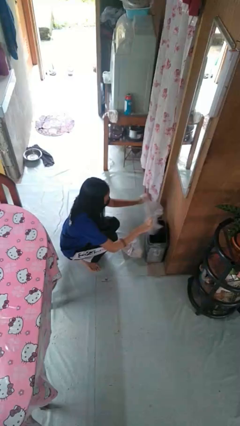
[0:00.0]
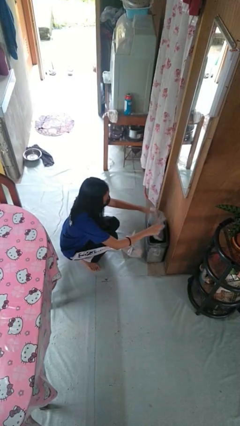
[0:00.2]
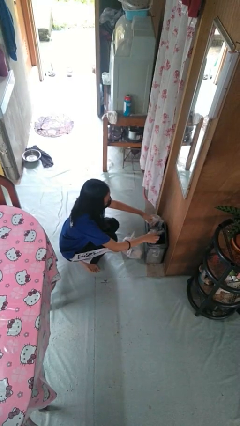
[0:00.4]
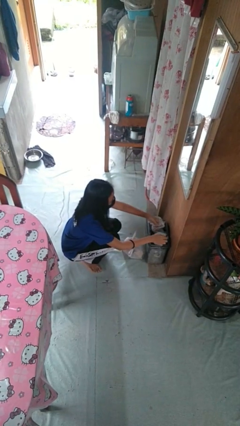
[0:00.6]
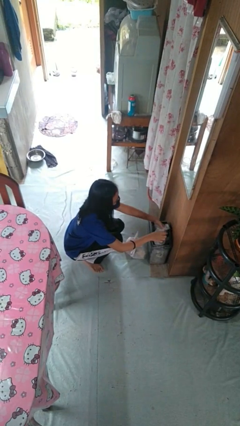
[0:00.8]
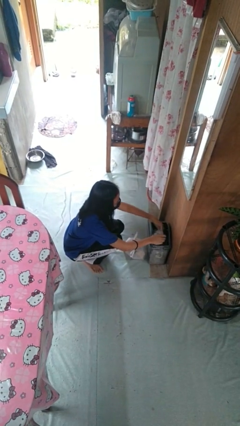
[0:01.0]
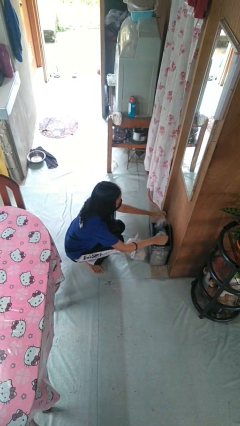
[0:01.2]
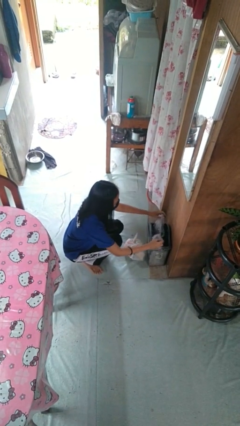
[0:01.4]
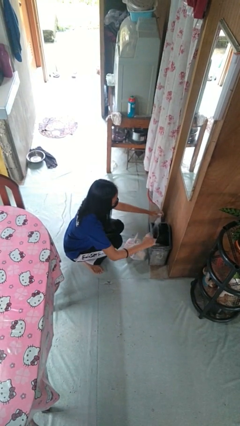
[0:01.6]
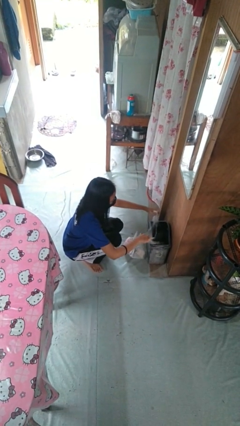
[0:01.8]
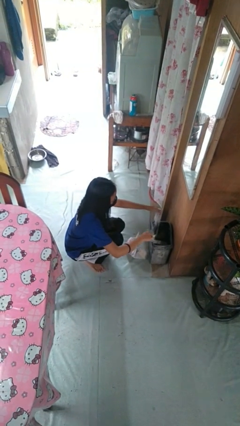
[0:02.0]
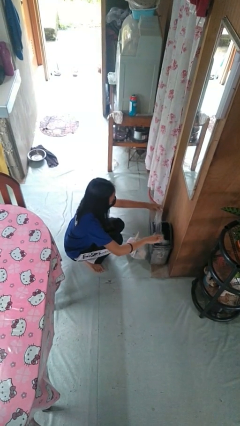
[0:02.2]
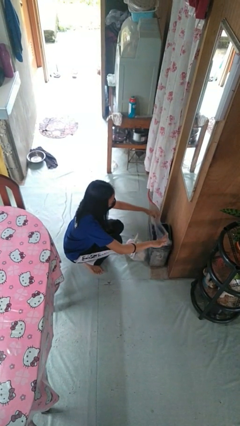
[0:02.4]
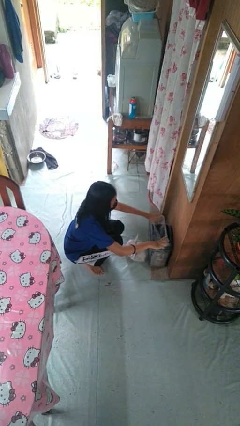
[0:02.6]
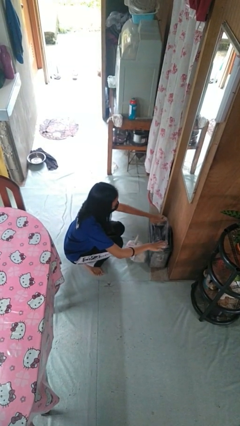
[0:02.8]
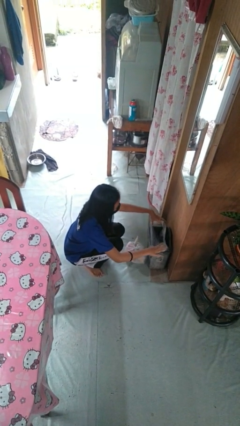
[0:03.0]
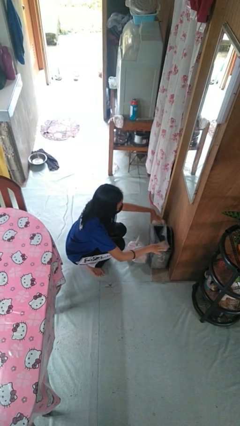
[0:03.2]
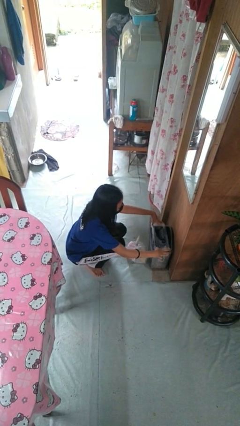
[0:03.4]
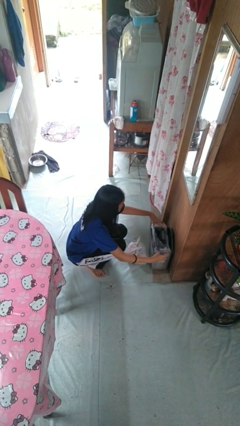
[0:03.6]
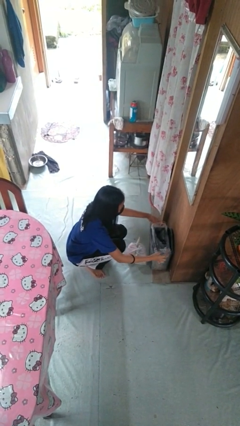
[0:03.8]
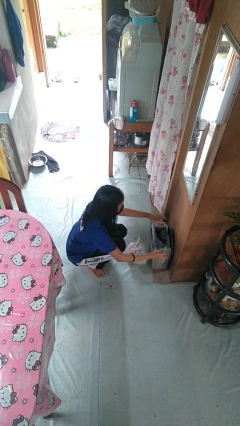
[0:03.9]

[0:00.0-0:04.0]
person inserts trashbag into trashcan

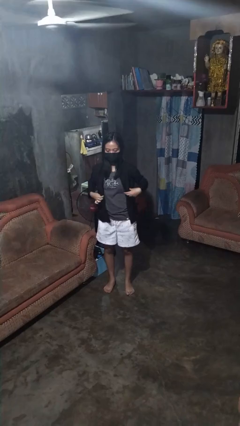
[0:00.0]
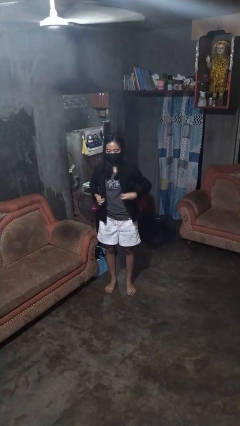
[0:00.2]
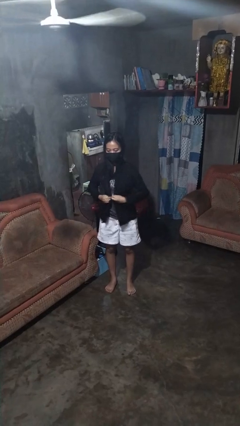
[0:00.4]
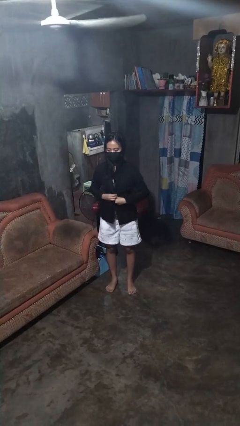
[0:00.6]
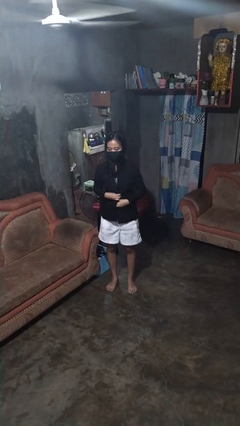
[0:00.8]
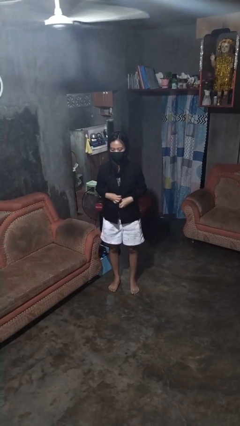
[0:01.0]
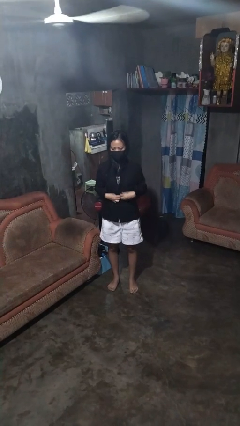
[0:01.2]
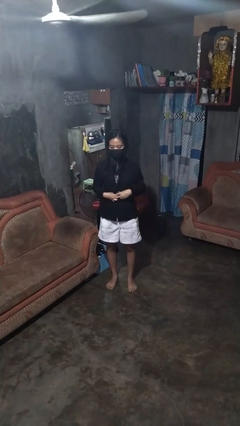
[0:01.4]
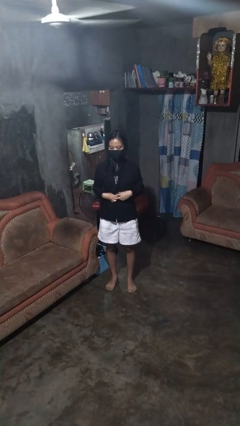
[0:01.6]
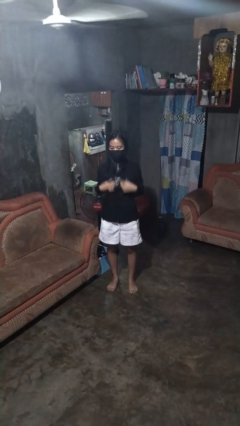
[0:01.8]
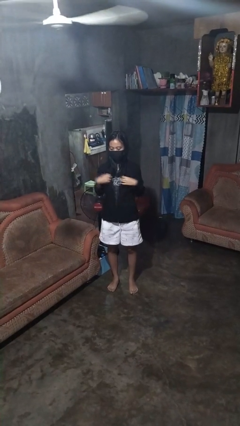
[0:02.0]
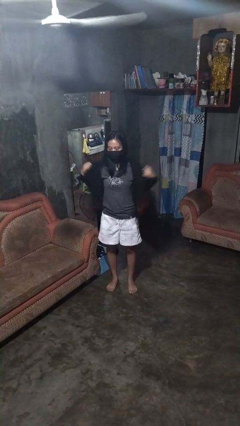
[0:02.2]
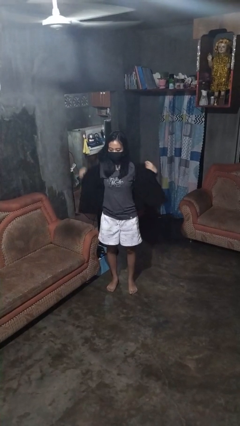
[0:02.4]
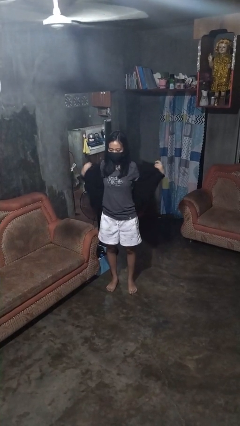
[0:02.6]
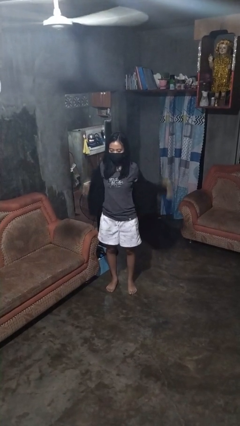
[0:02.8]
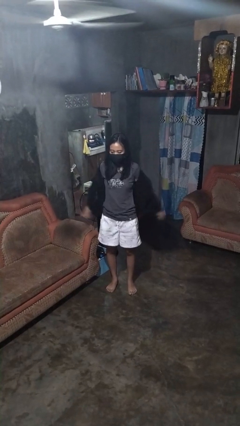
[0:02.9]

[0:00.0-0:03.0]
person takes off shirt

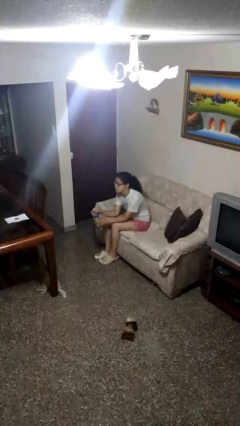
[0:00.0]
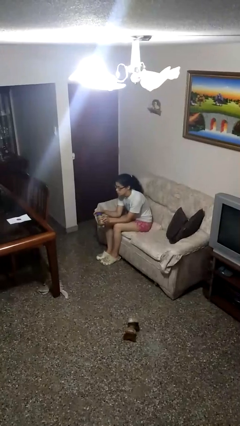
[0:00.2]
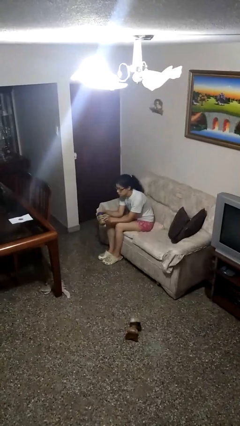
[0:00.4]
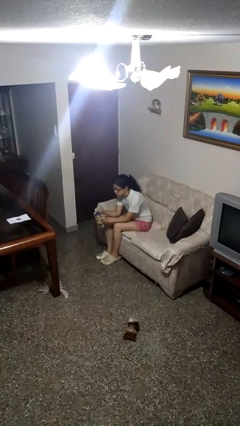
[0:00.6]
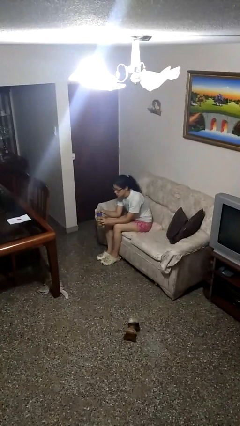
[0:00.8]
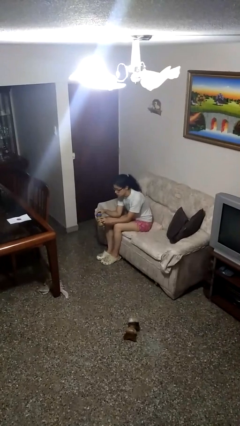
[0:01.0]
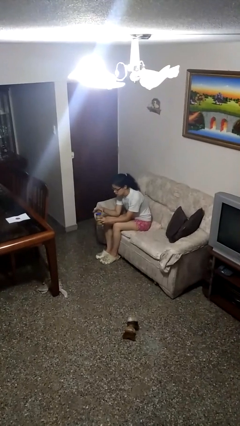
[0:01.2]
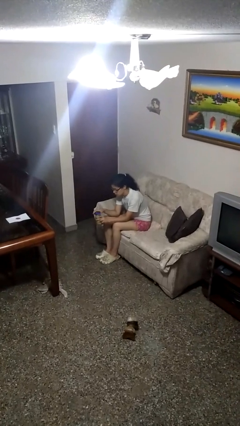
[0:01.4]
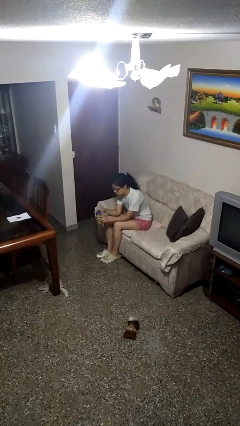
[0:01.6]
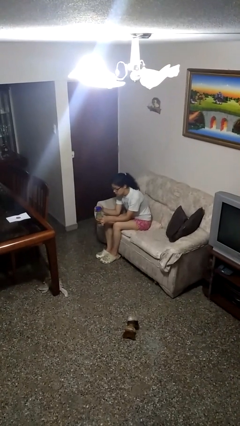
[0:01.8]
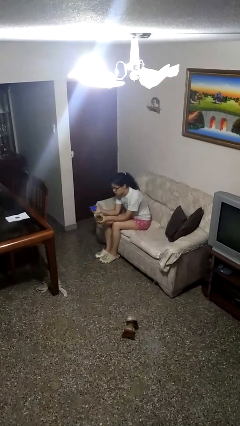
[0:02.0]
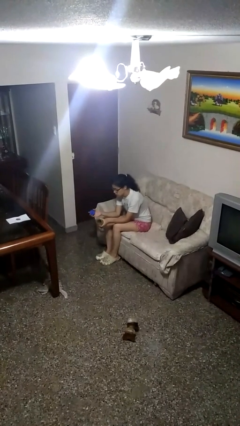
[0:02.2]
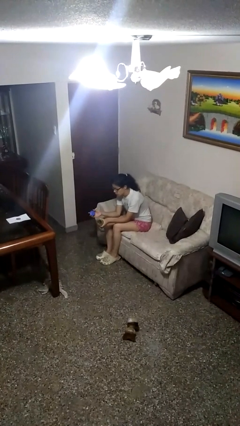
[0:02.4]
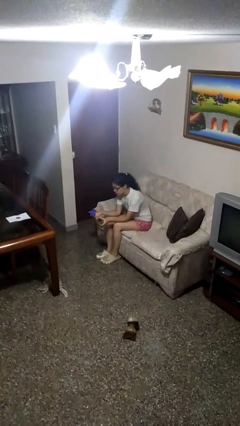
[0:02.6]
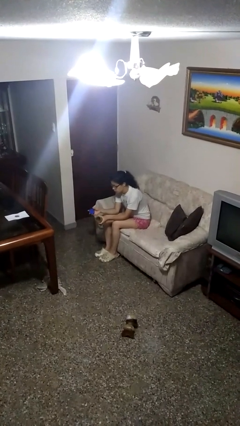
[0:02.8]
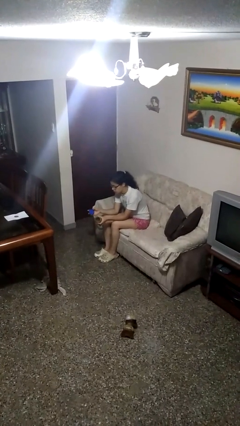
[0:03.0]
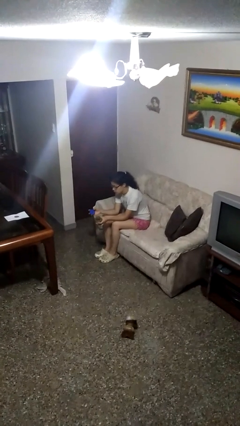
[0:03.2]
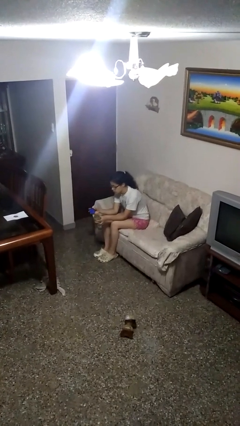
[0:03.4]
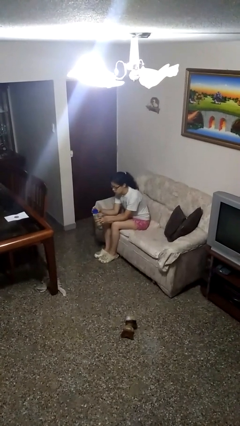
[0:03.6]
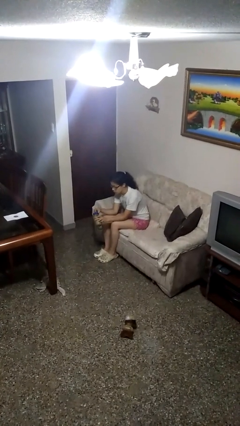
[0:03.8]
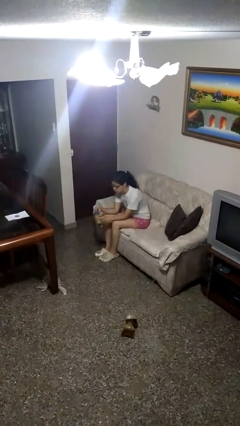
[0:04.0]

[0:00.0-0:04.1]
person opens jar

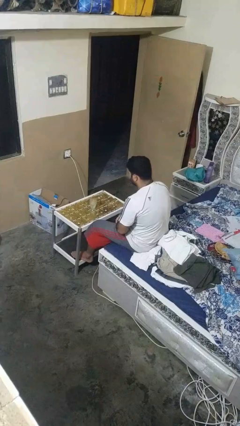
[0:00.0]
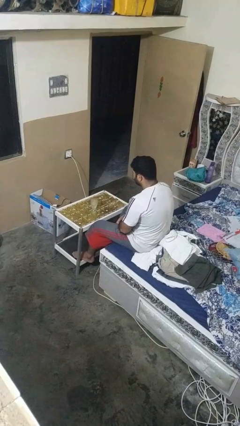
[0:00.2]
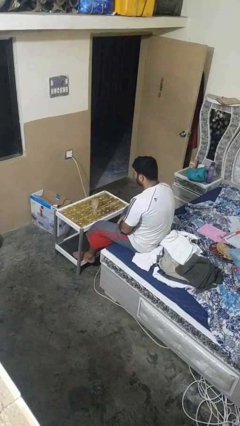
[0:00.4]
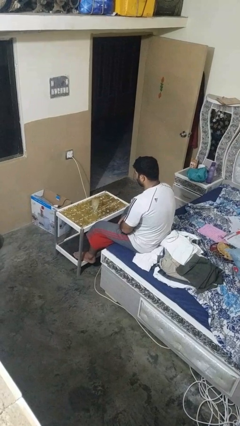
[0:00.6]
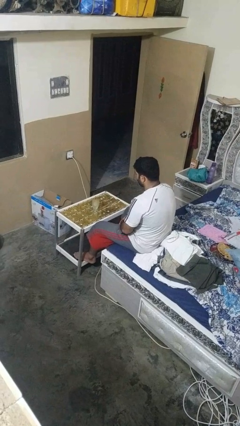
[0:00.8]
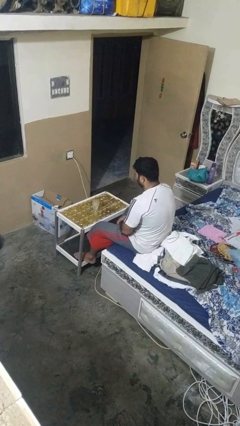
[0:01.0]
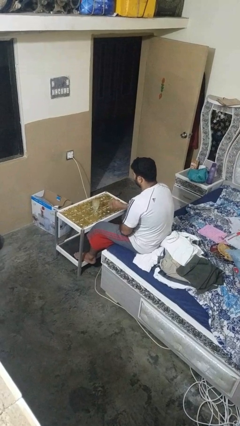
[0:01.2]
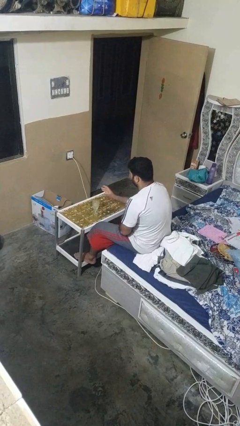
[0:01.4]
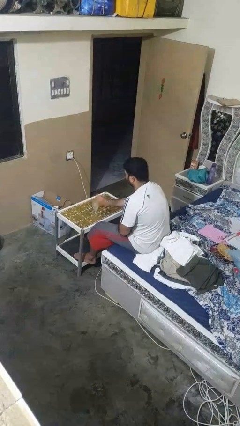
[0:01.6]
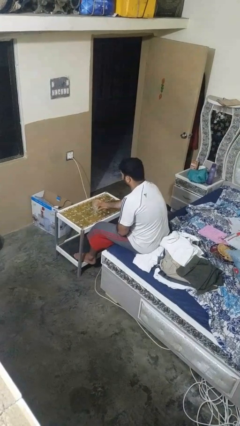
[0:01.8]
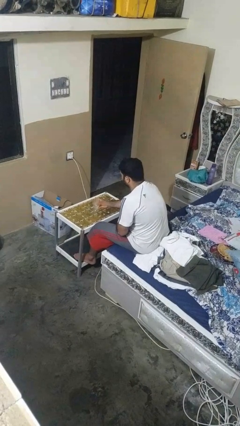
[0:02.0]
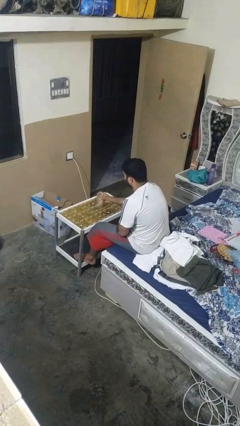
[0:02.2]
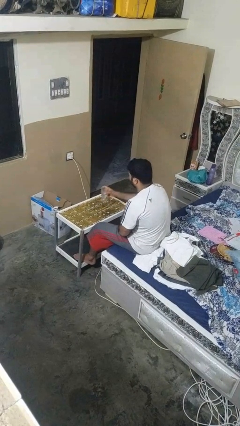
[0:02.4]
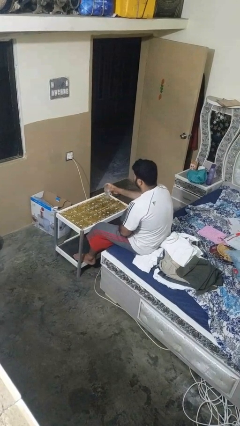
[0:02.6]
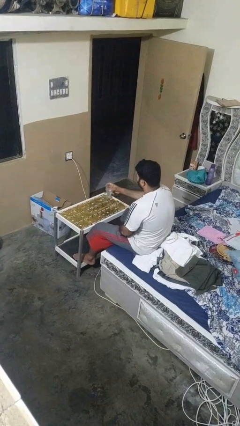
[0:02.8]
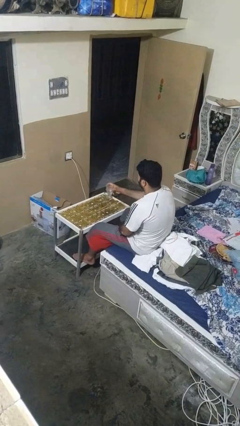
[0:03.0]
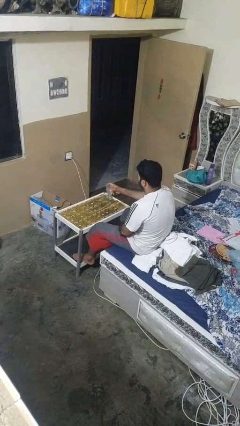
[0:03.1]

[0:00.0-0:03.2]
person picks up object from table

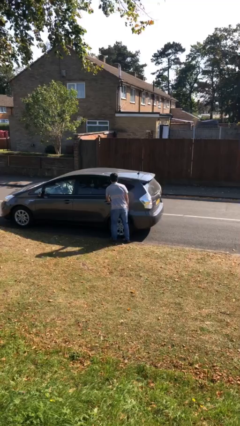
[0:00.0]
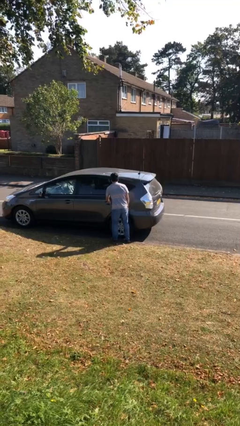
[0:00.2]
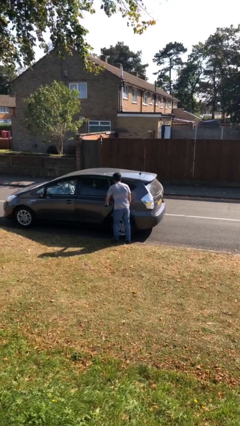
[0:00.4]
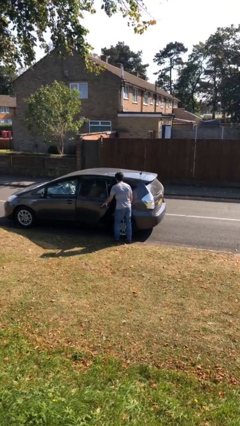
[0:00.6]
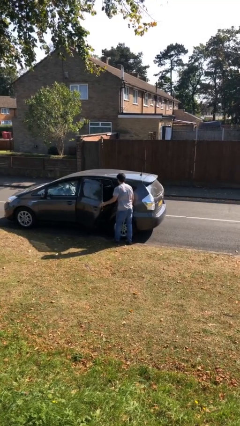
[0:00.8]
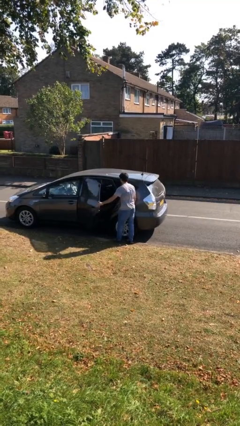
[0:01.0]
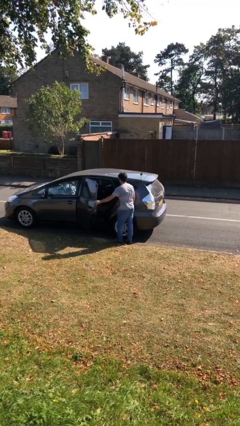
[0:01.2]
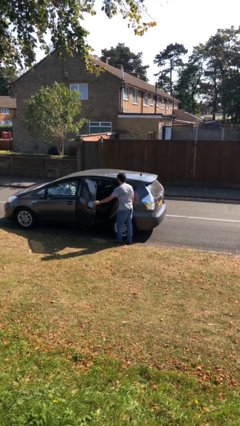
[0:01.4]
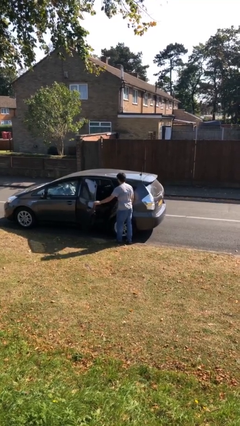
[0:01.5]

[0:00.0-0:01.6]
person opens car door

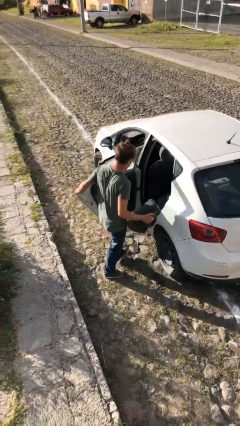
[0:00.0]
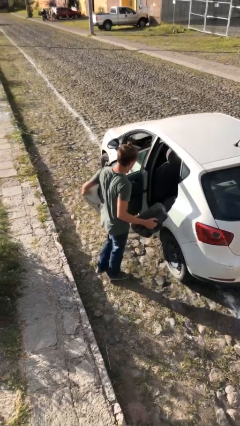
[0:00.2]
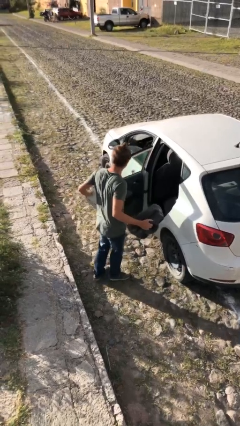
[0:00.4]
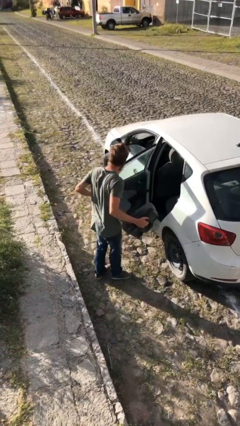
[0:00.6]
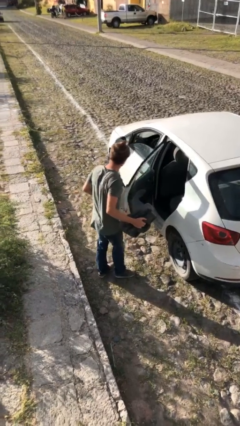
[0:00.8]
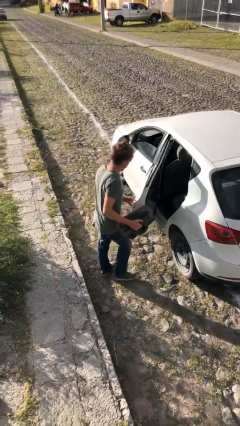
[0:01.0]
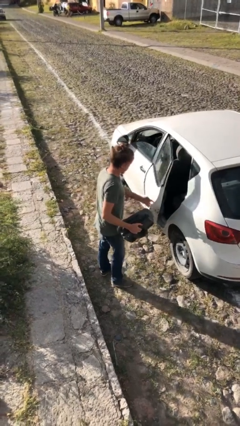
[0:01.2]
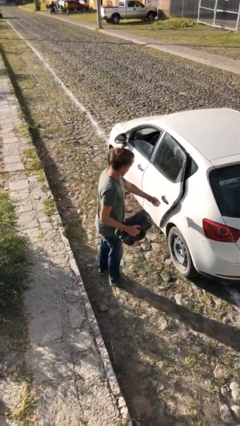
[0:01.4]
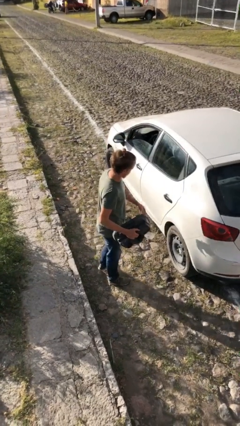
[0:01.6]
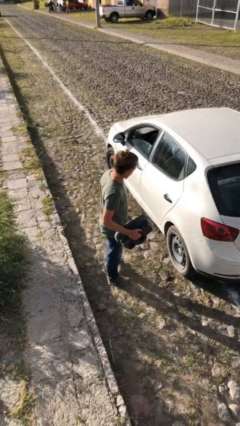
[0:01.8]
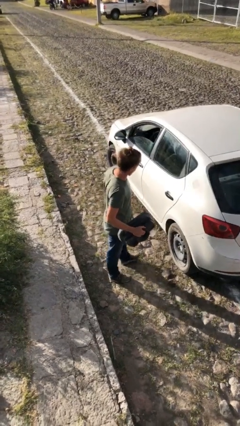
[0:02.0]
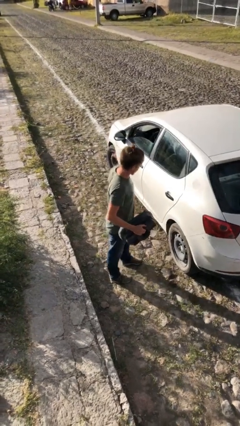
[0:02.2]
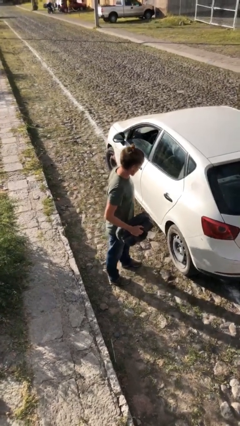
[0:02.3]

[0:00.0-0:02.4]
person closes car door
